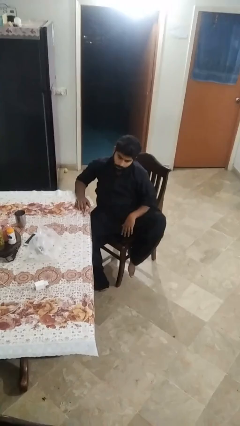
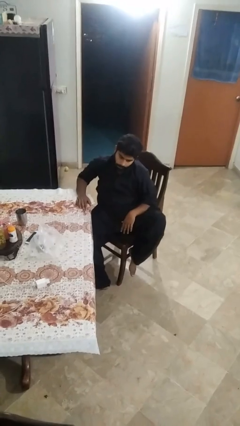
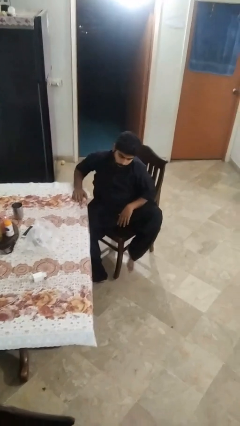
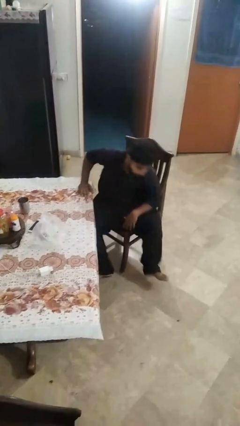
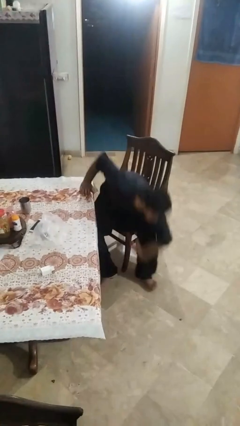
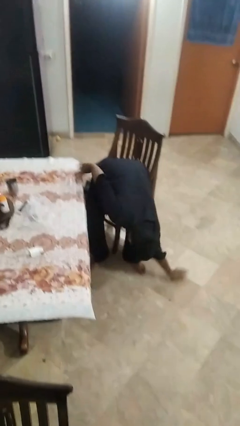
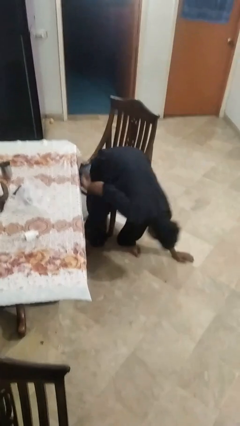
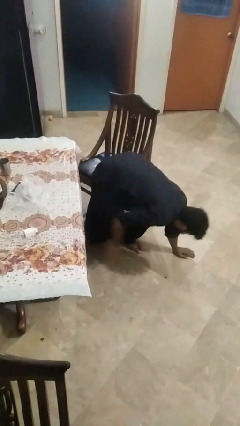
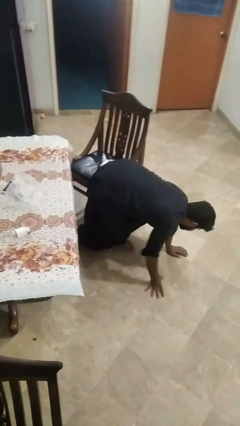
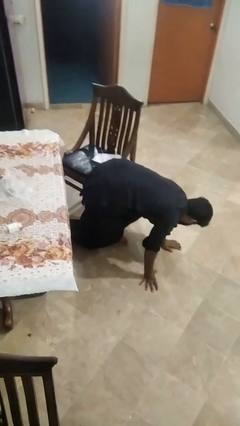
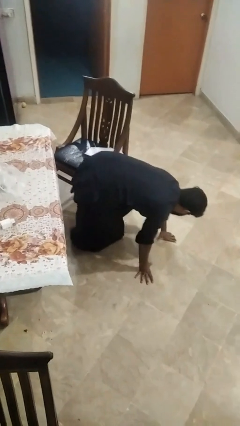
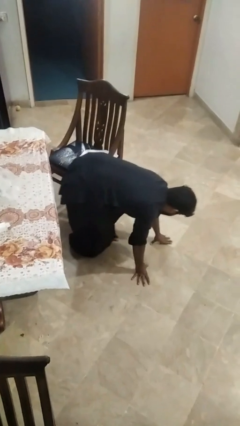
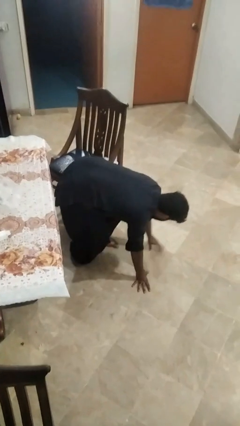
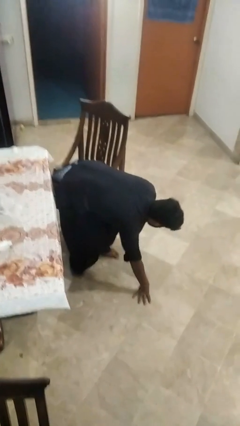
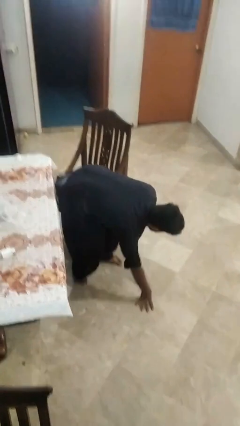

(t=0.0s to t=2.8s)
person falls from chair

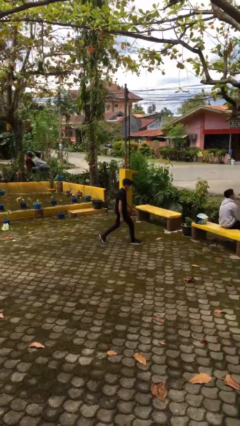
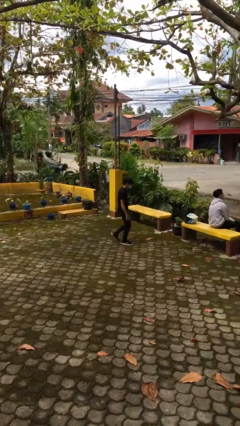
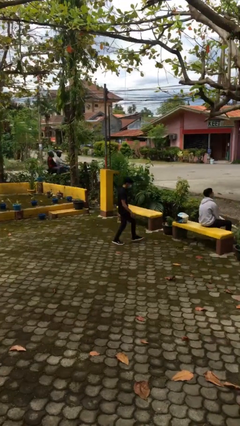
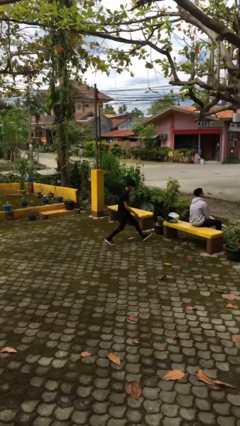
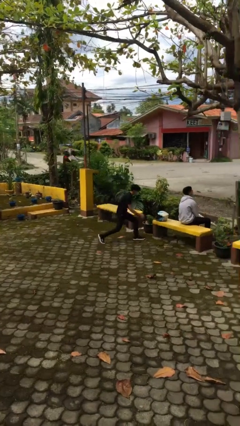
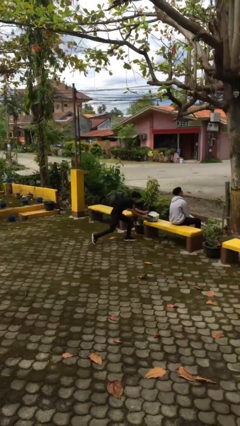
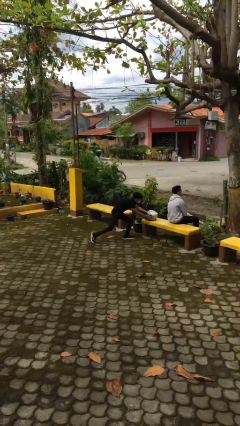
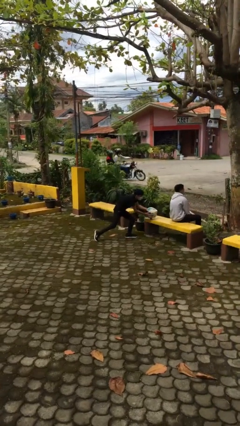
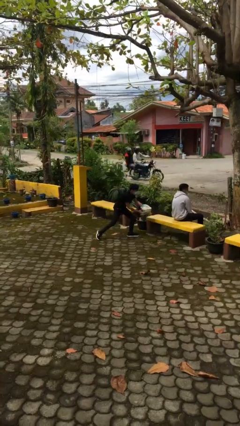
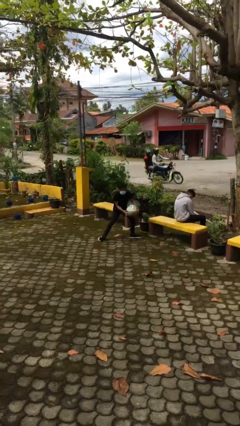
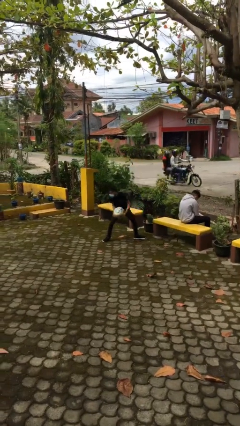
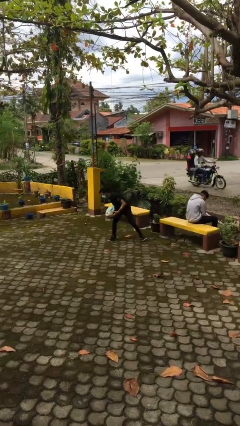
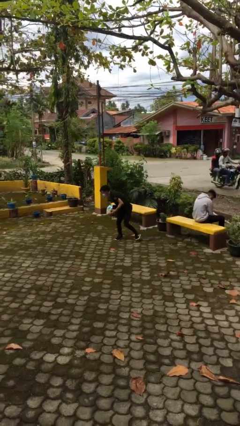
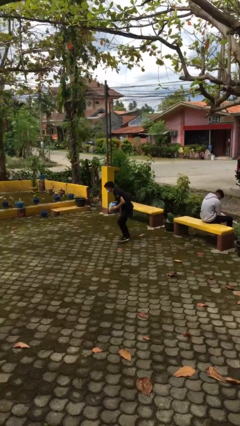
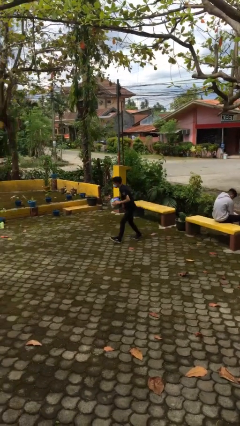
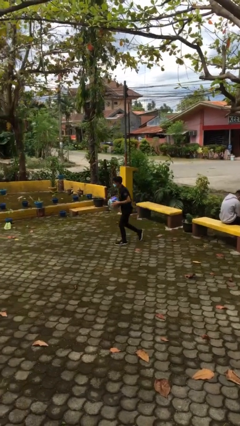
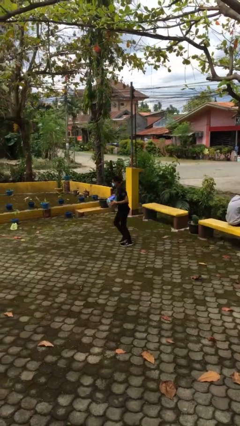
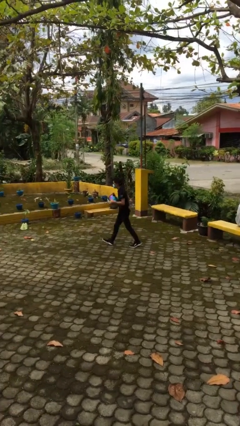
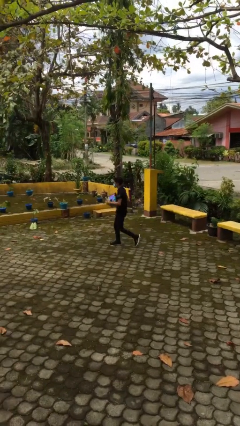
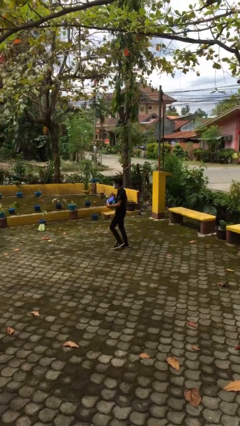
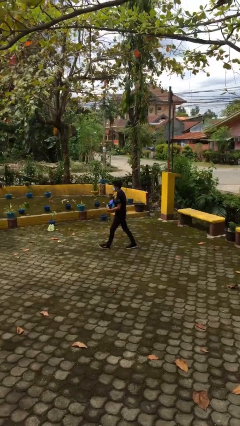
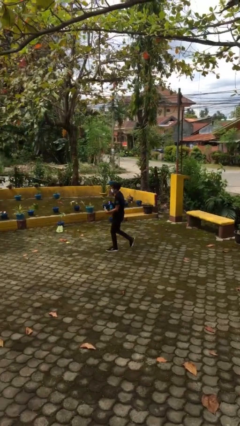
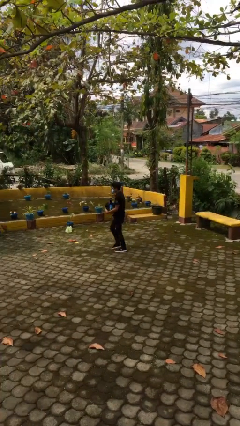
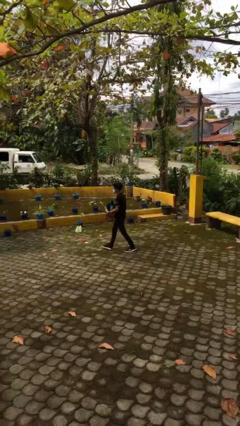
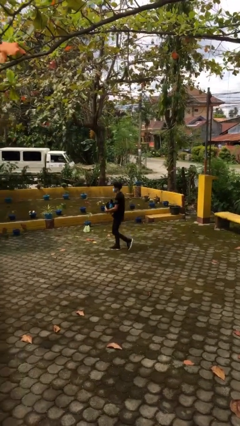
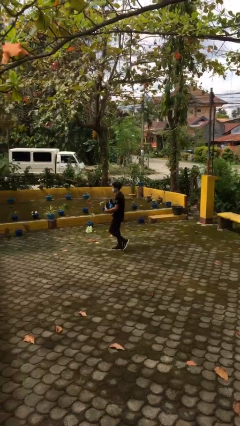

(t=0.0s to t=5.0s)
person steals object from person

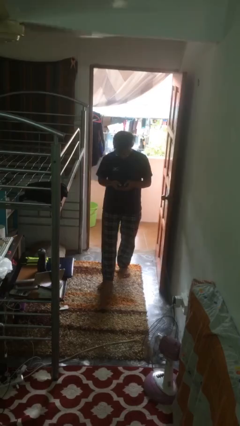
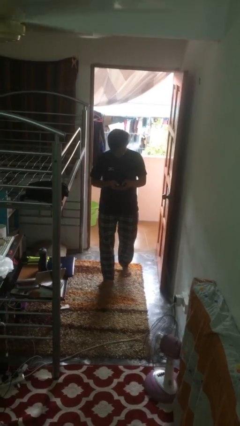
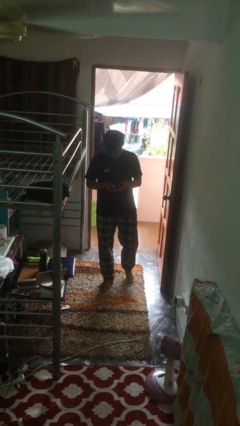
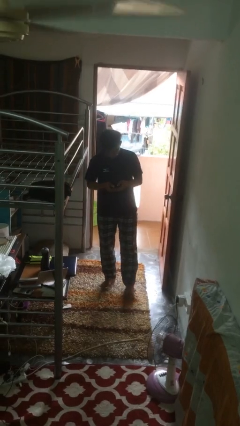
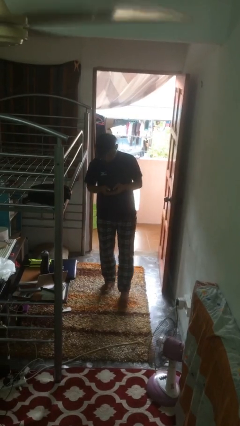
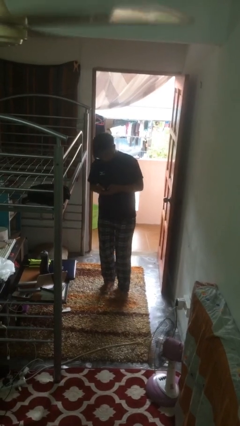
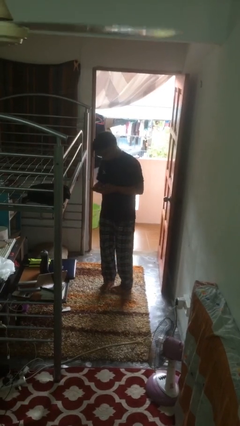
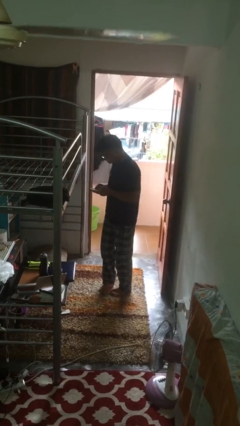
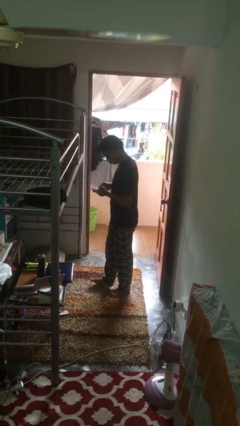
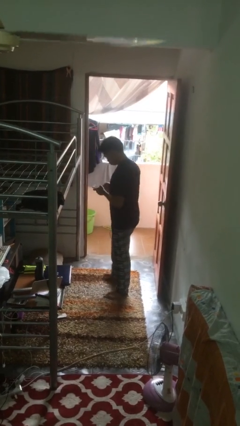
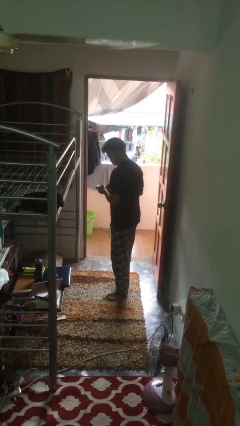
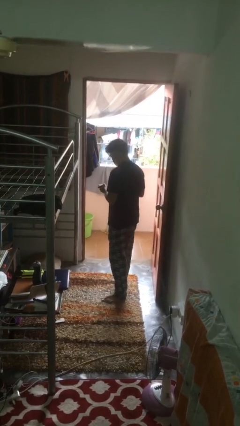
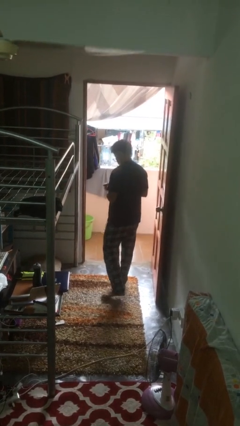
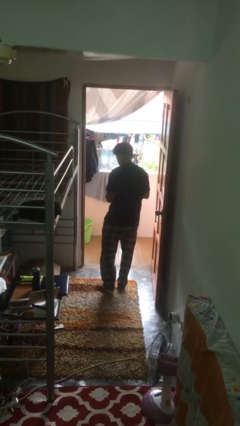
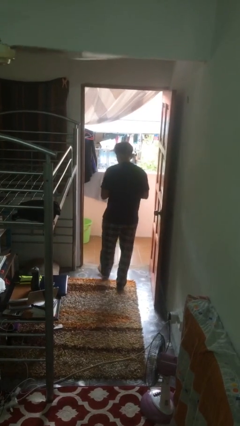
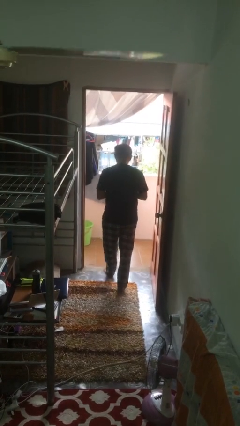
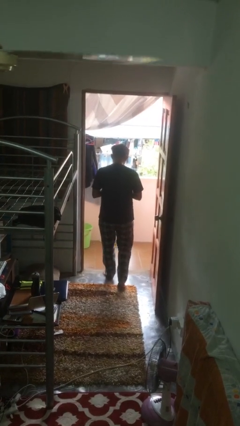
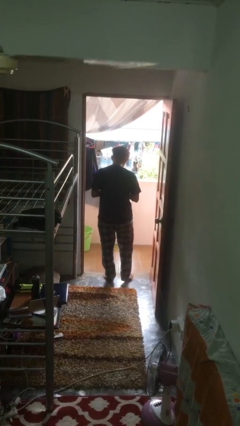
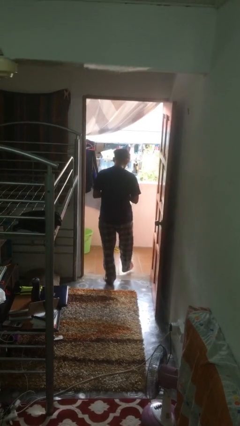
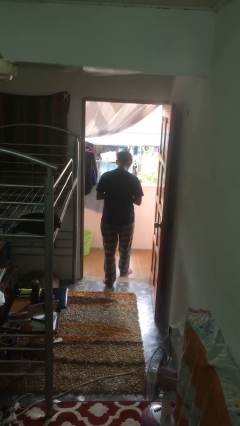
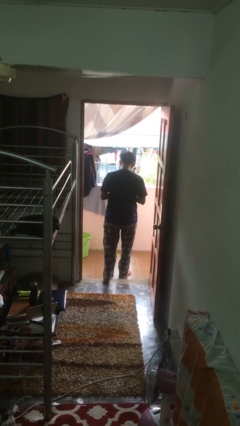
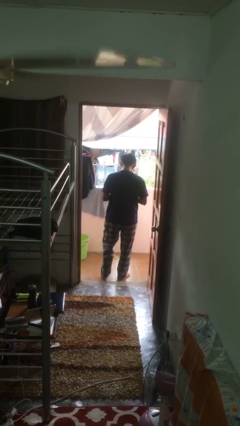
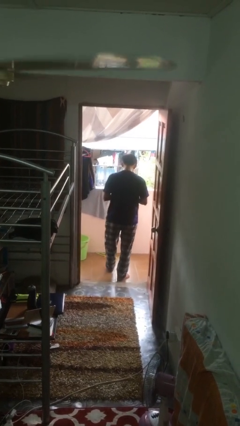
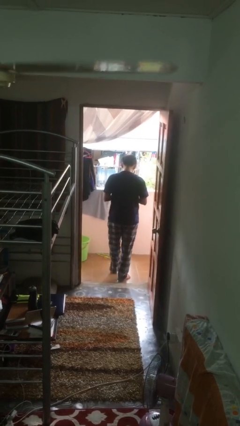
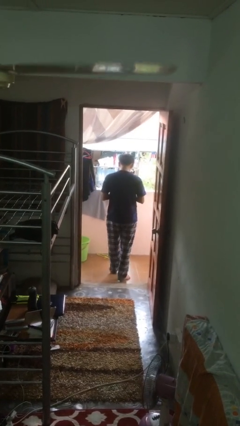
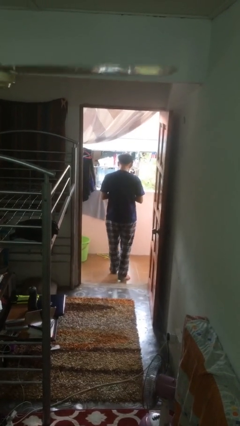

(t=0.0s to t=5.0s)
person exits scene through structure

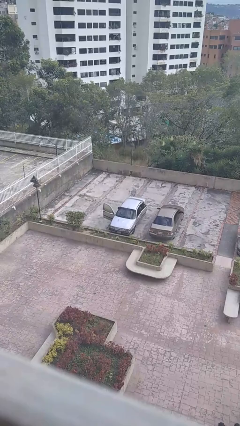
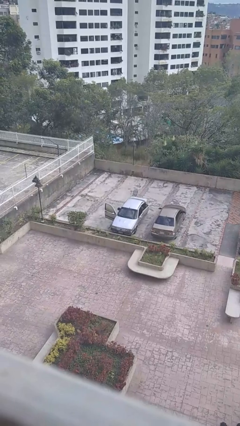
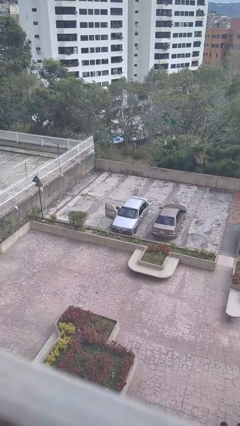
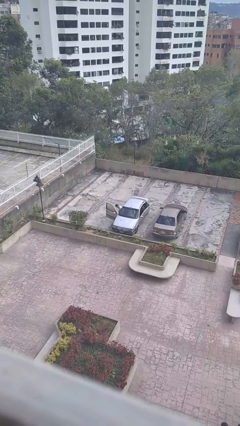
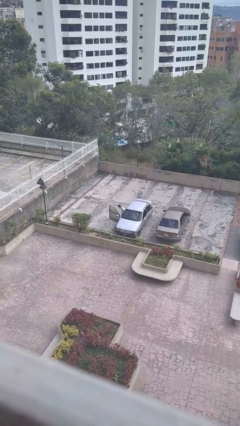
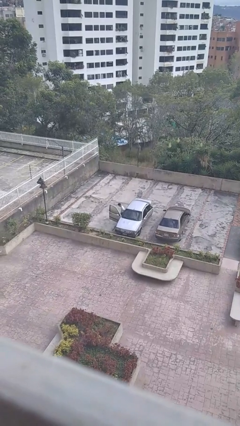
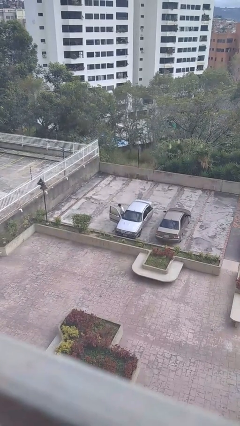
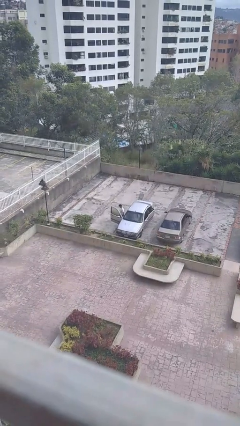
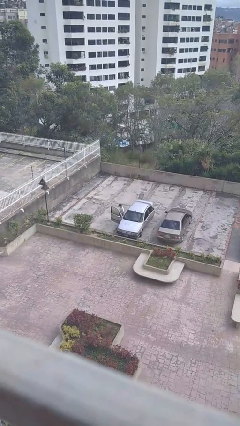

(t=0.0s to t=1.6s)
person exits car

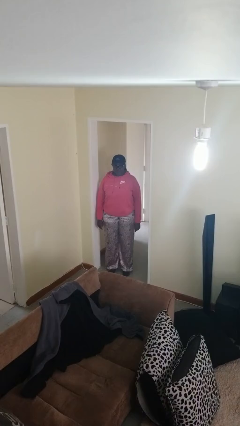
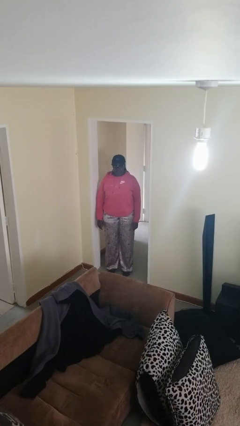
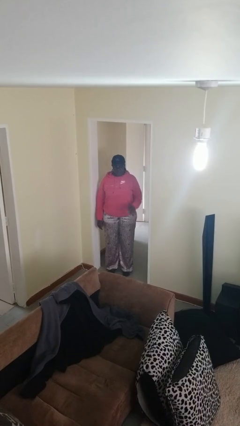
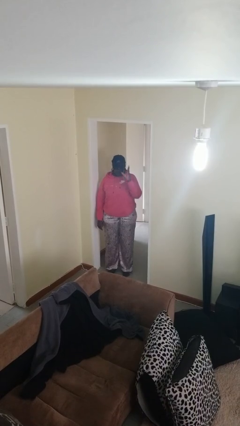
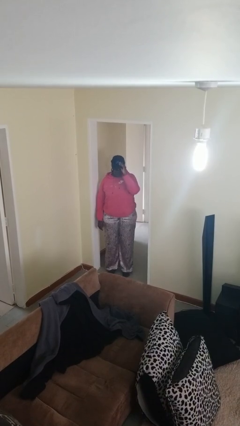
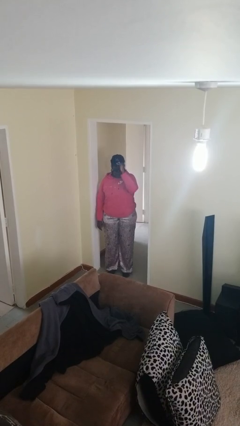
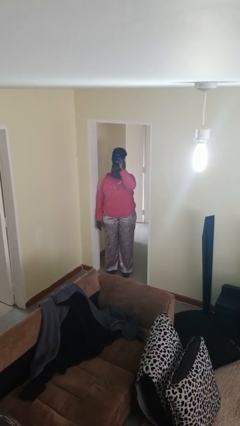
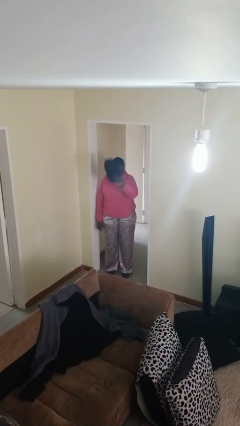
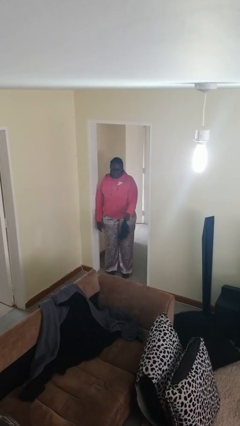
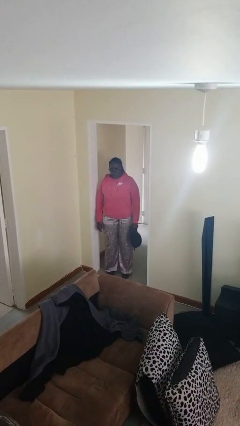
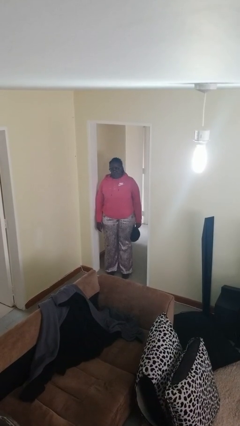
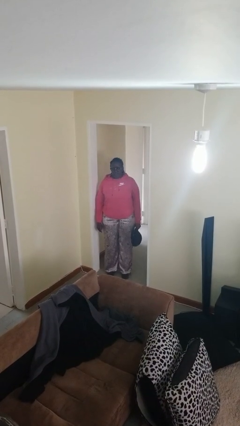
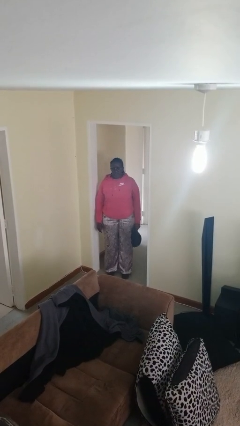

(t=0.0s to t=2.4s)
person takes off hat

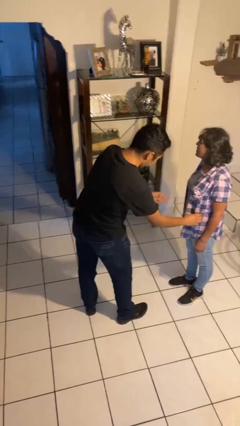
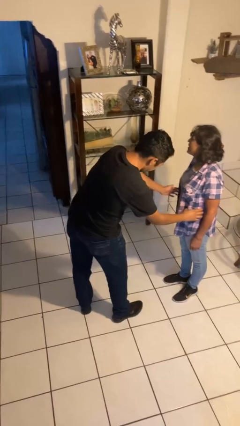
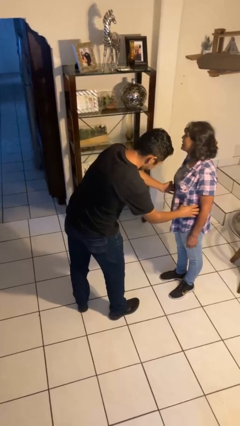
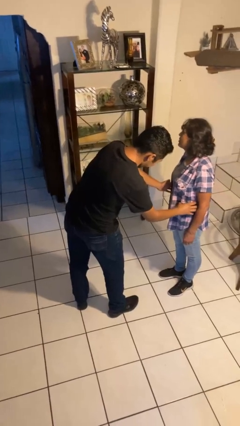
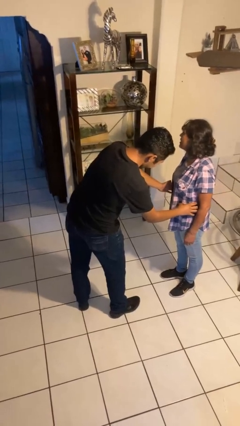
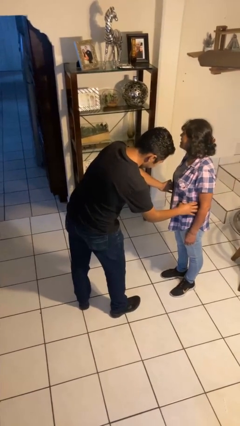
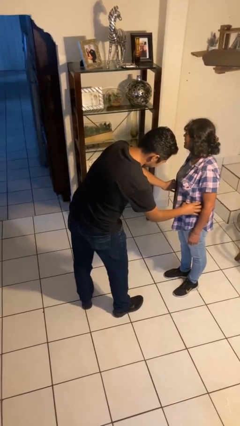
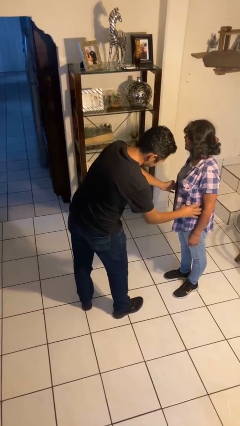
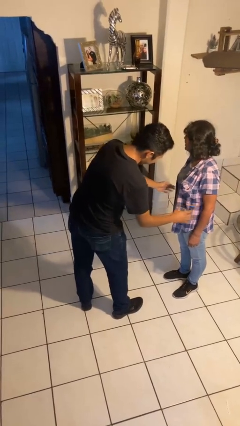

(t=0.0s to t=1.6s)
person tickles person
